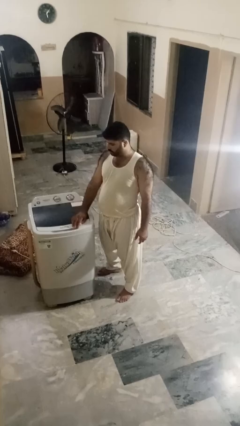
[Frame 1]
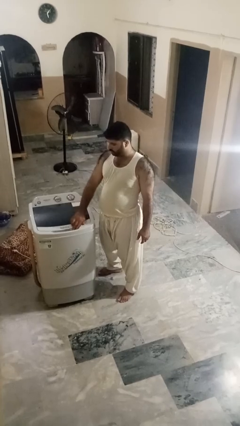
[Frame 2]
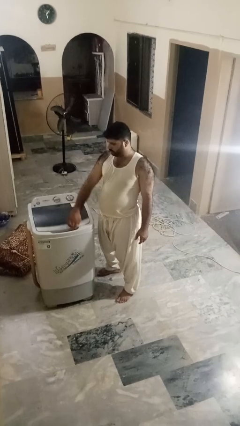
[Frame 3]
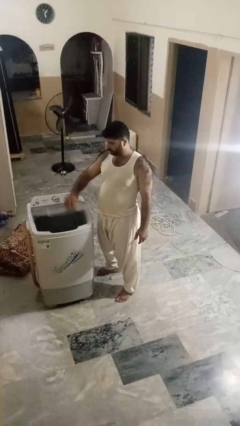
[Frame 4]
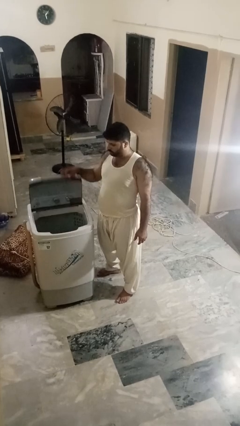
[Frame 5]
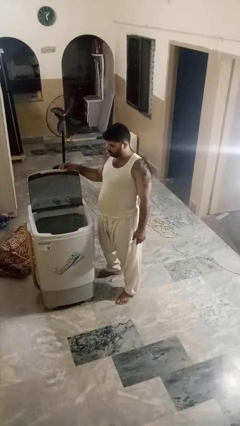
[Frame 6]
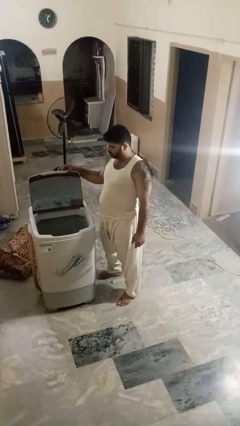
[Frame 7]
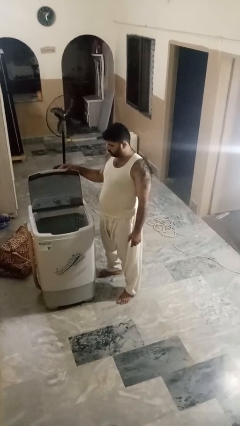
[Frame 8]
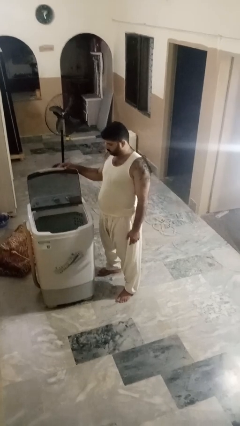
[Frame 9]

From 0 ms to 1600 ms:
person opens clothes washer

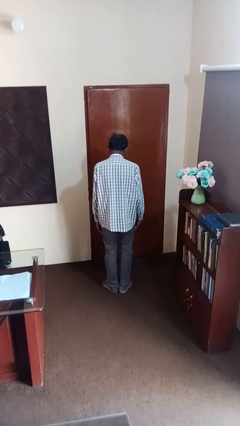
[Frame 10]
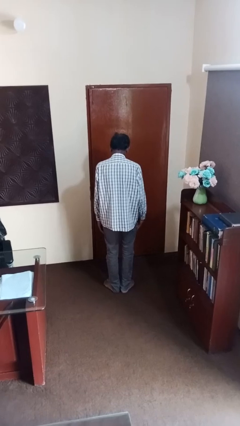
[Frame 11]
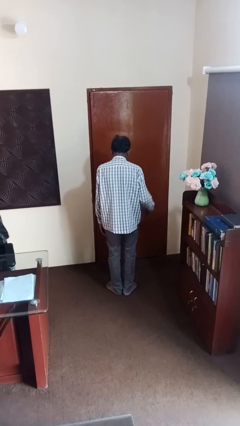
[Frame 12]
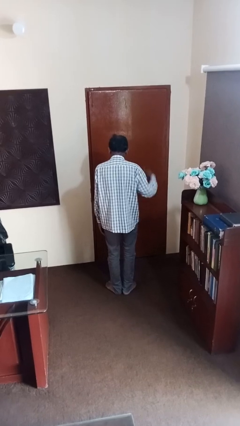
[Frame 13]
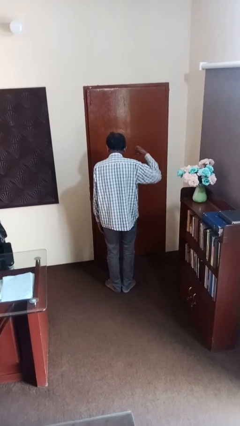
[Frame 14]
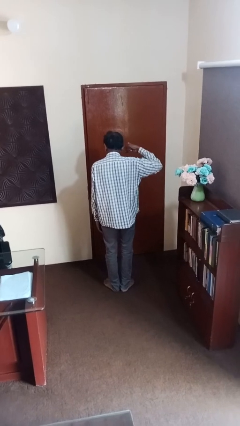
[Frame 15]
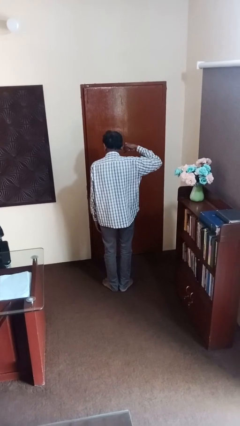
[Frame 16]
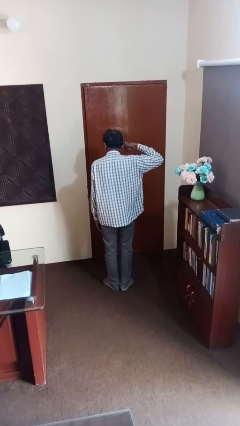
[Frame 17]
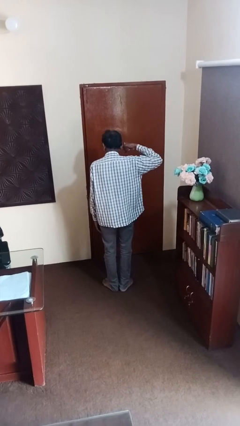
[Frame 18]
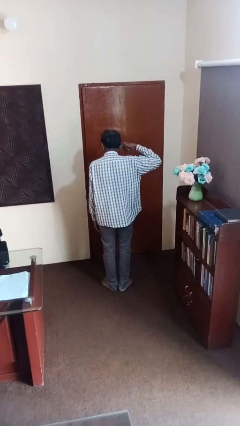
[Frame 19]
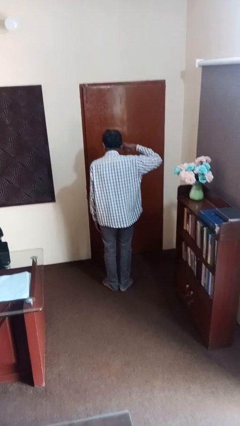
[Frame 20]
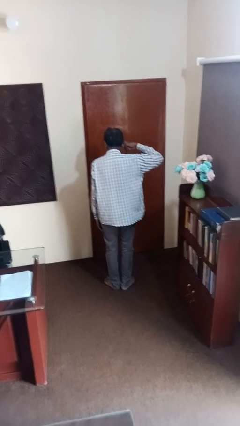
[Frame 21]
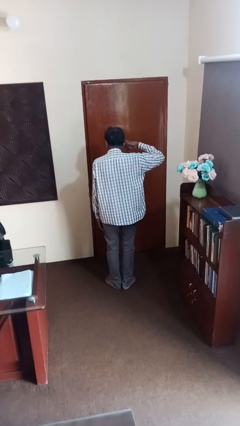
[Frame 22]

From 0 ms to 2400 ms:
person gestures call me

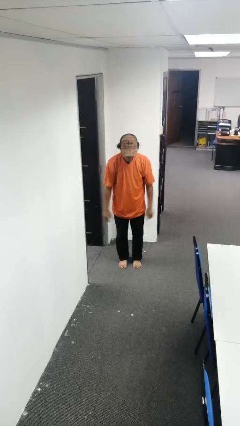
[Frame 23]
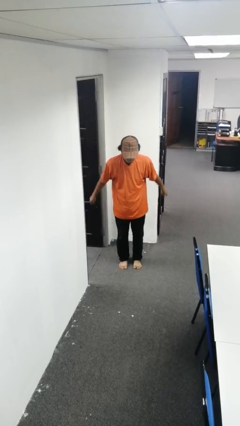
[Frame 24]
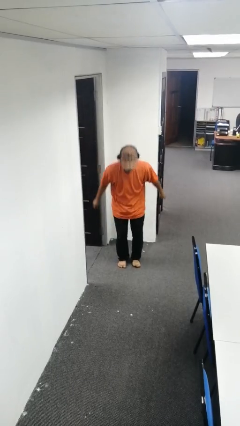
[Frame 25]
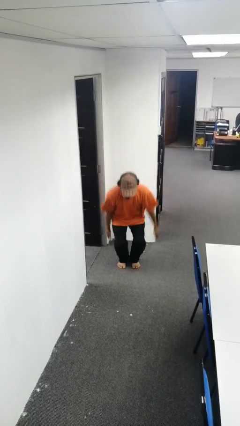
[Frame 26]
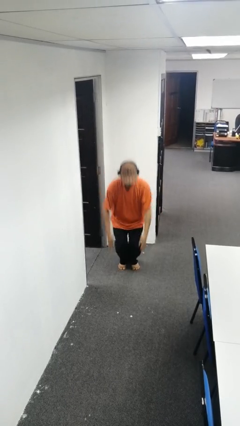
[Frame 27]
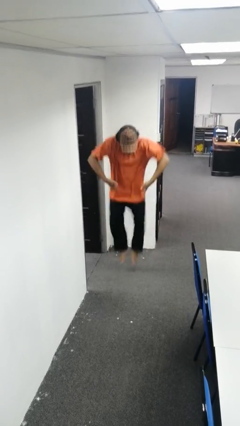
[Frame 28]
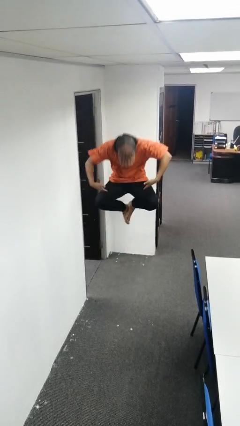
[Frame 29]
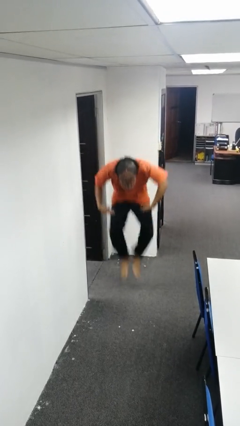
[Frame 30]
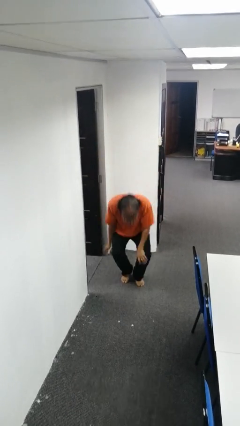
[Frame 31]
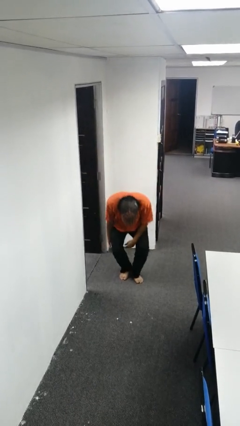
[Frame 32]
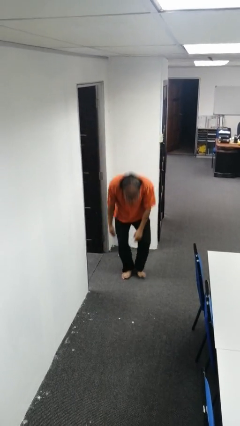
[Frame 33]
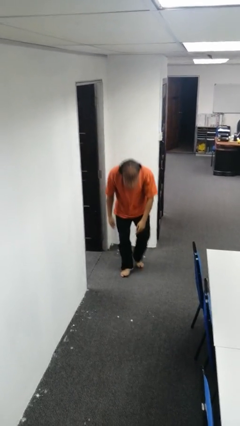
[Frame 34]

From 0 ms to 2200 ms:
person jumps

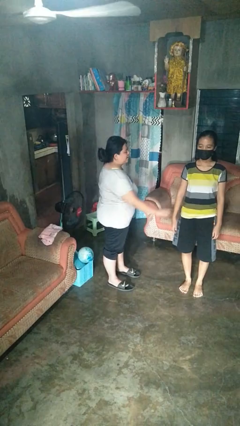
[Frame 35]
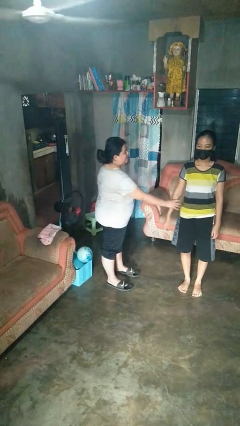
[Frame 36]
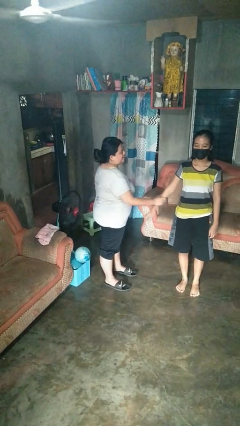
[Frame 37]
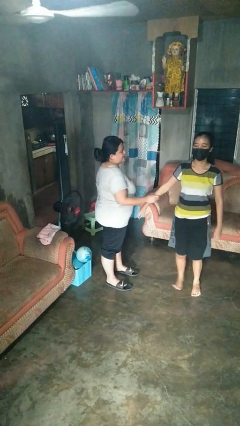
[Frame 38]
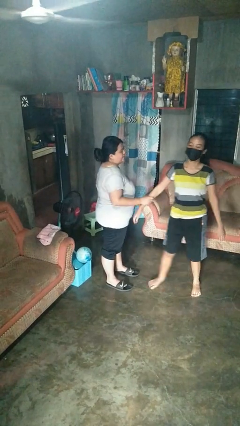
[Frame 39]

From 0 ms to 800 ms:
person grabs person by forearm

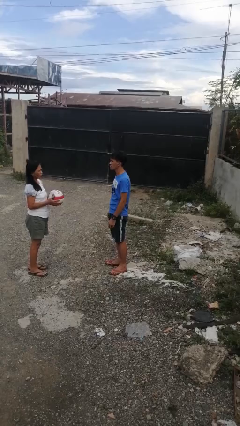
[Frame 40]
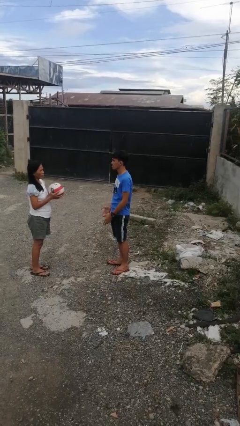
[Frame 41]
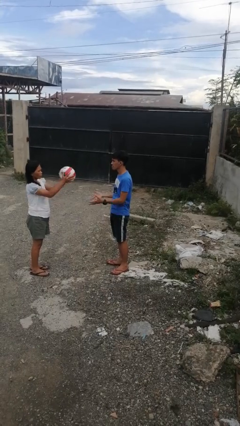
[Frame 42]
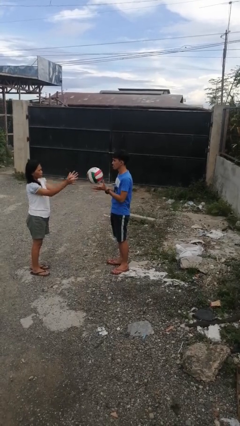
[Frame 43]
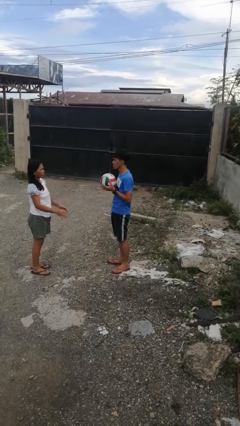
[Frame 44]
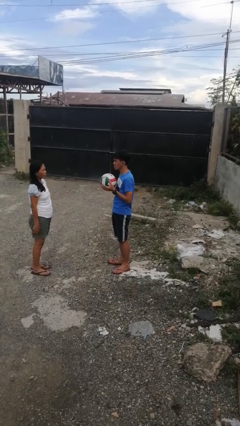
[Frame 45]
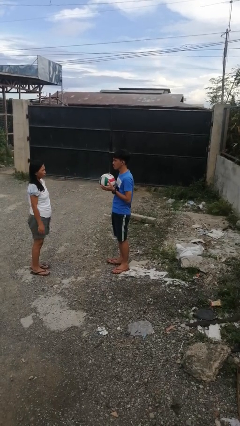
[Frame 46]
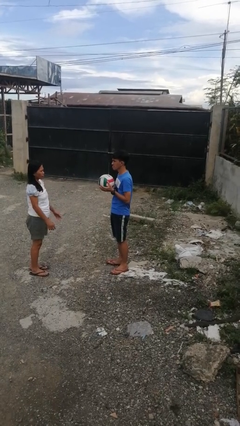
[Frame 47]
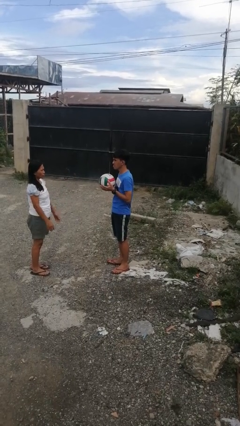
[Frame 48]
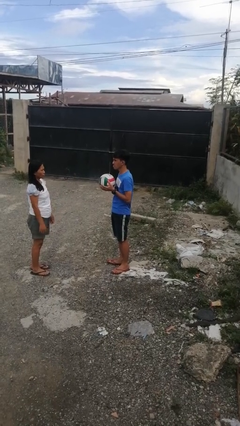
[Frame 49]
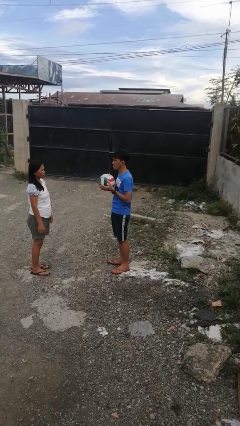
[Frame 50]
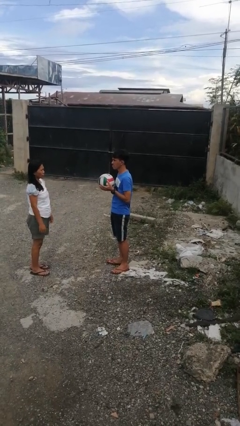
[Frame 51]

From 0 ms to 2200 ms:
person catches object from person

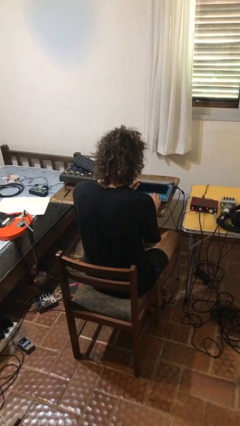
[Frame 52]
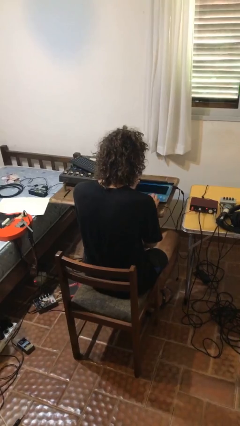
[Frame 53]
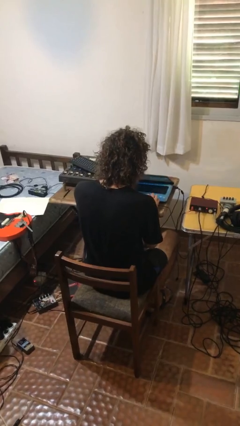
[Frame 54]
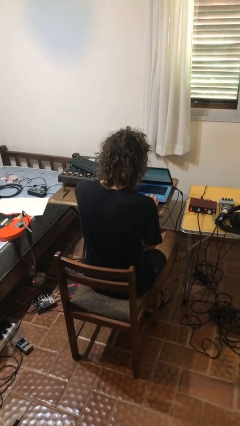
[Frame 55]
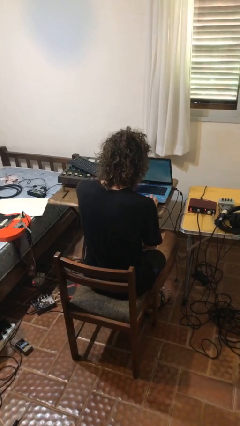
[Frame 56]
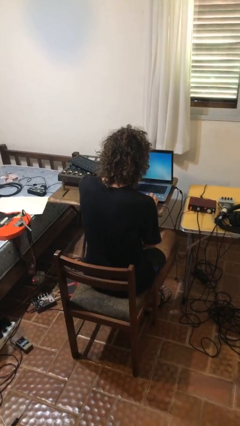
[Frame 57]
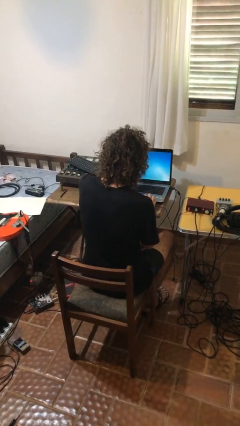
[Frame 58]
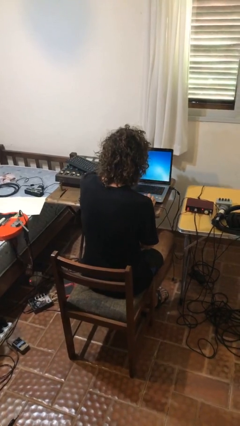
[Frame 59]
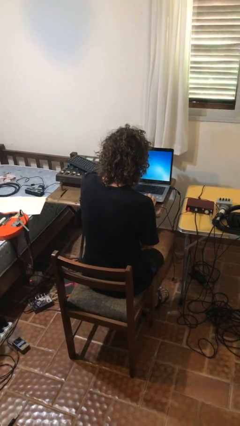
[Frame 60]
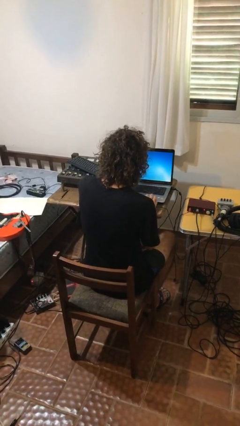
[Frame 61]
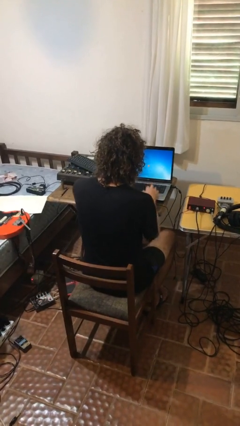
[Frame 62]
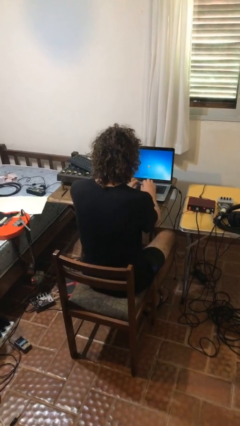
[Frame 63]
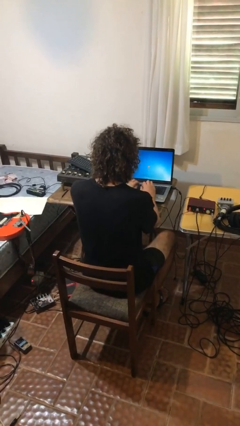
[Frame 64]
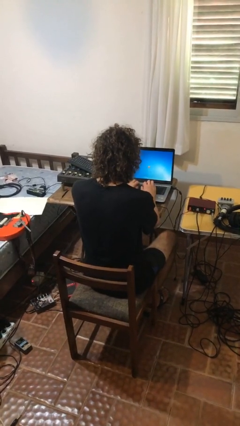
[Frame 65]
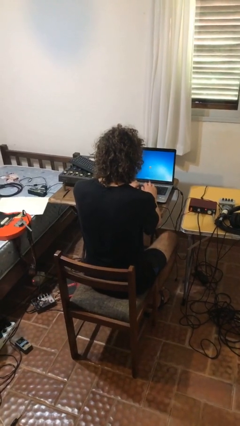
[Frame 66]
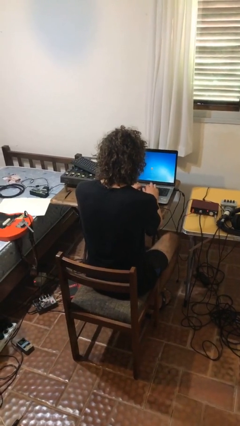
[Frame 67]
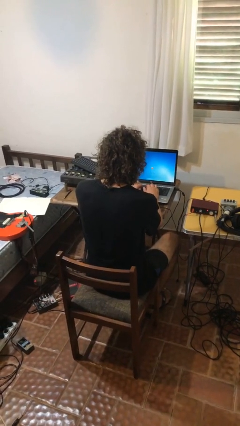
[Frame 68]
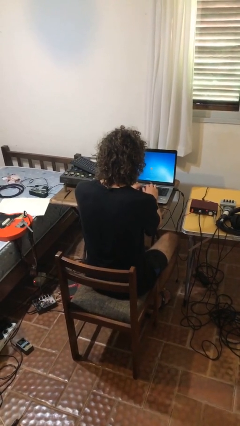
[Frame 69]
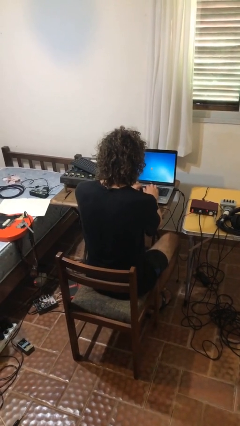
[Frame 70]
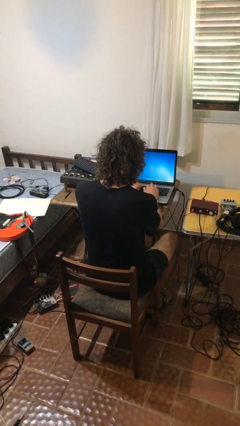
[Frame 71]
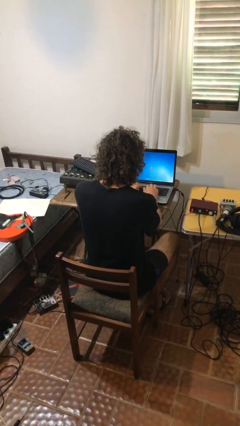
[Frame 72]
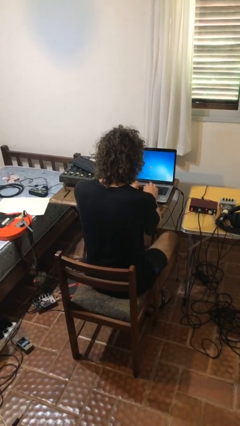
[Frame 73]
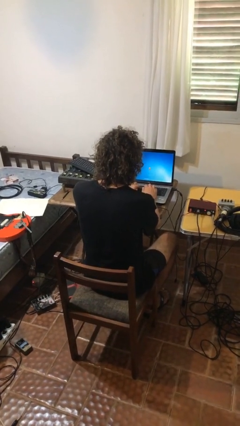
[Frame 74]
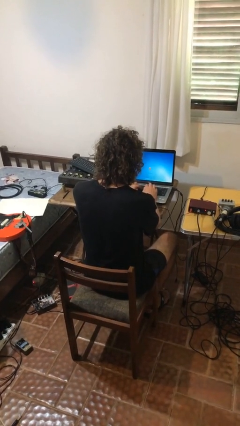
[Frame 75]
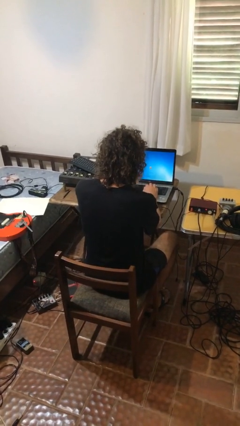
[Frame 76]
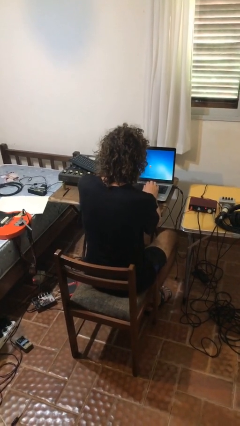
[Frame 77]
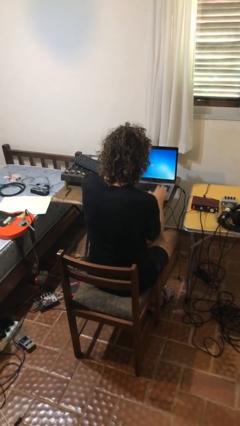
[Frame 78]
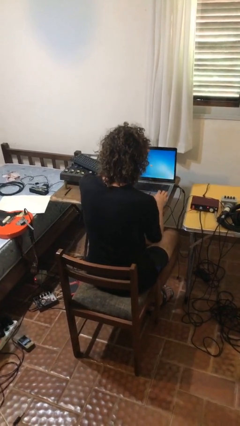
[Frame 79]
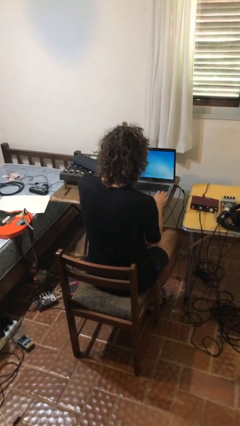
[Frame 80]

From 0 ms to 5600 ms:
person interacts with laptop

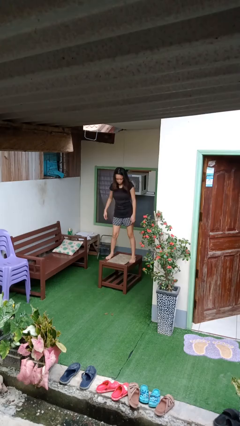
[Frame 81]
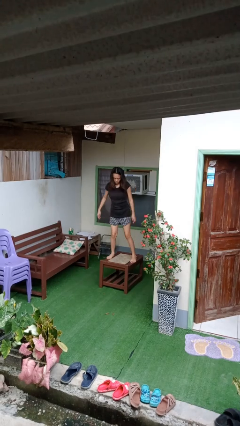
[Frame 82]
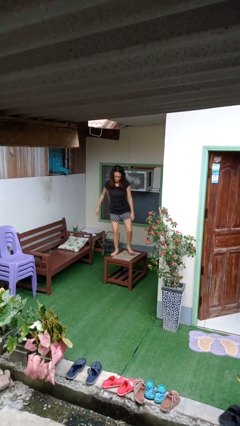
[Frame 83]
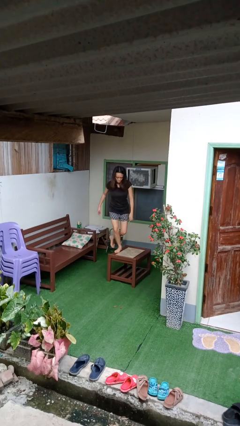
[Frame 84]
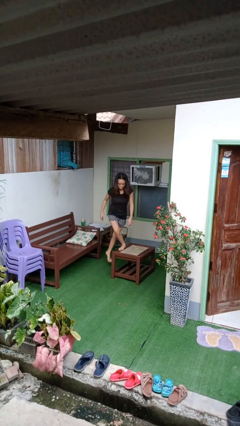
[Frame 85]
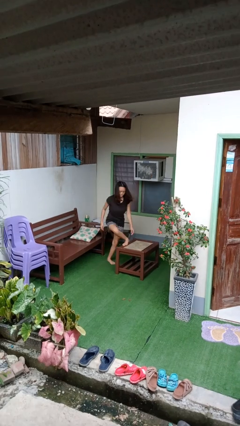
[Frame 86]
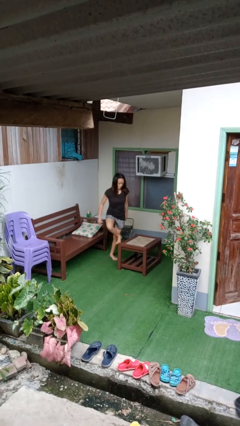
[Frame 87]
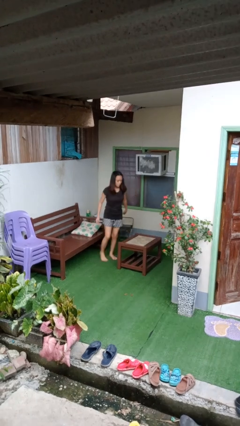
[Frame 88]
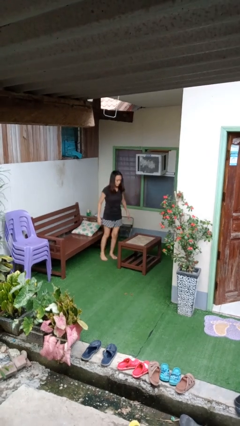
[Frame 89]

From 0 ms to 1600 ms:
person climbs off table

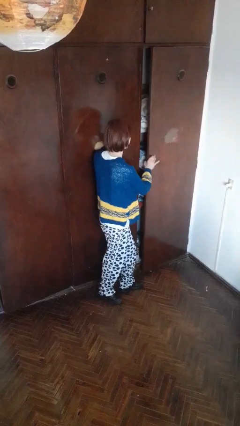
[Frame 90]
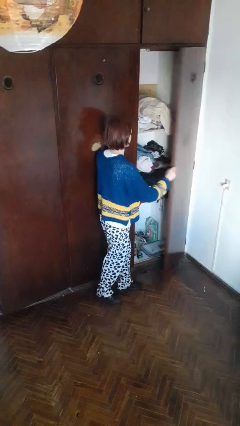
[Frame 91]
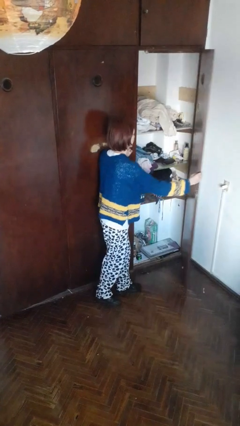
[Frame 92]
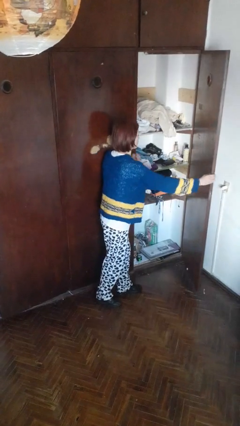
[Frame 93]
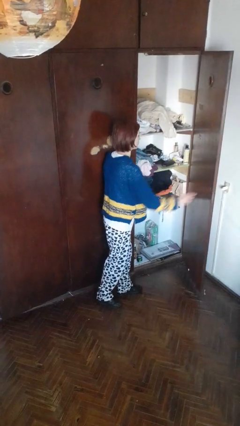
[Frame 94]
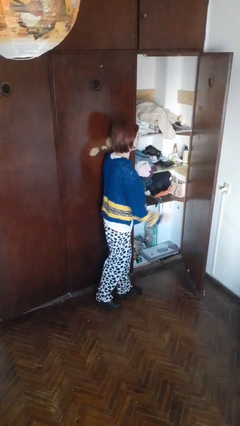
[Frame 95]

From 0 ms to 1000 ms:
person opens closet door
